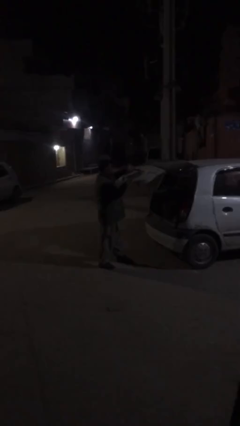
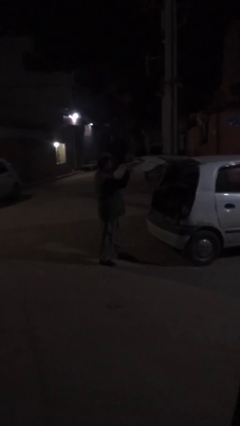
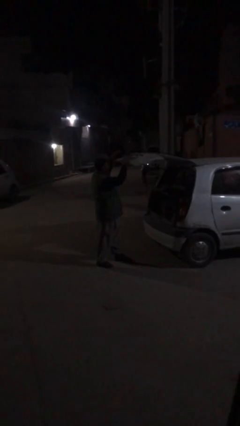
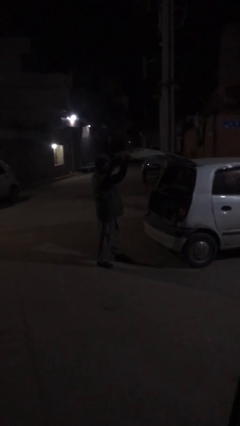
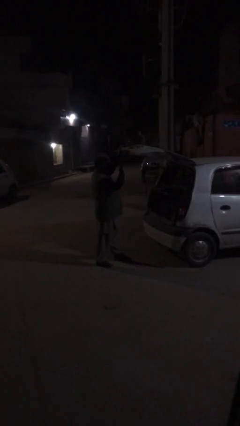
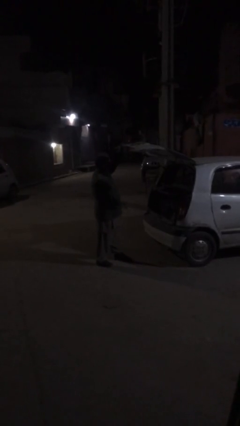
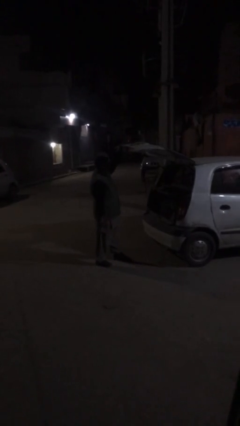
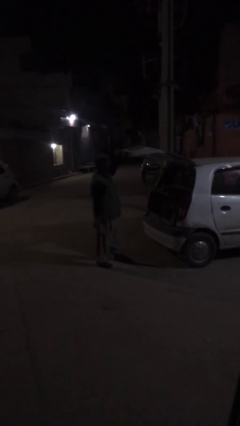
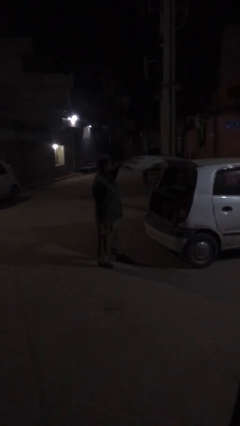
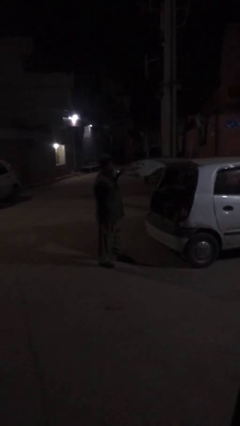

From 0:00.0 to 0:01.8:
person opens car trunk

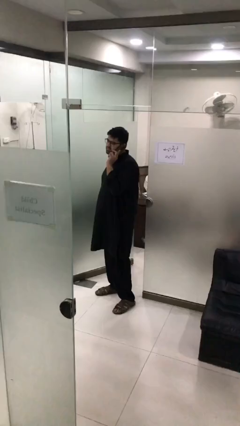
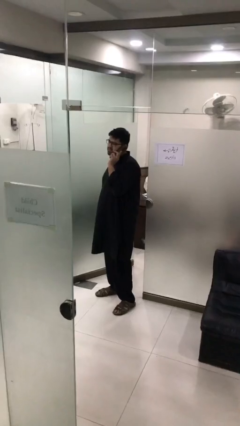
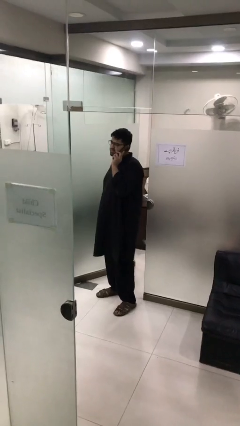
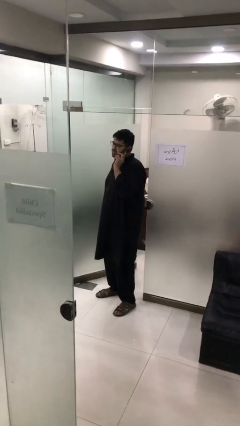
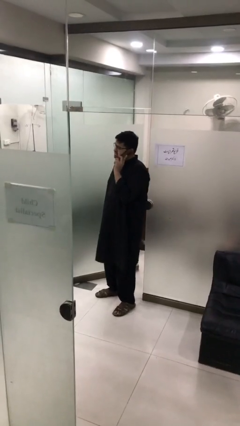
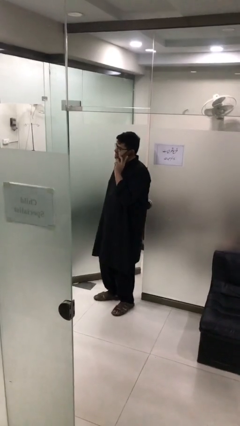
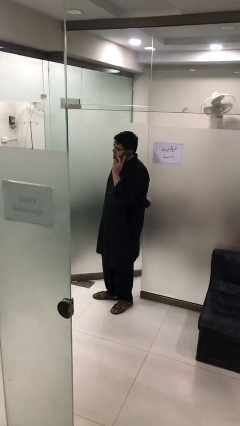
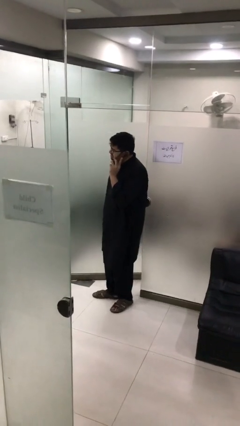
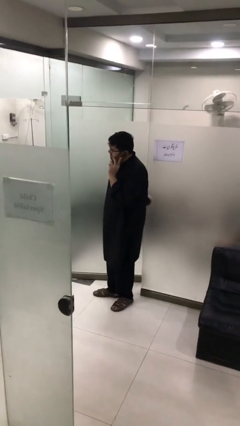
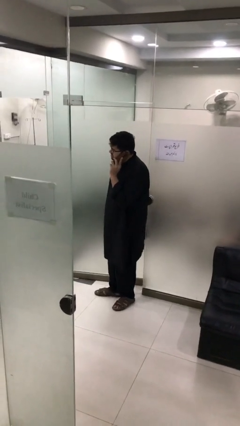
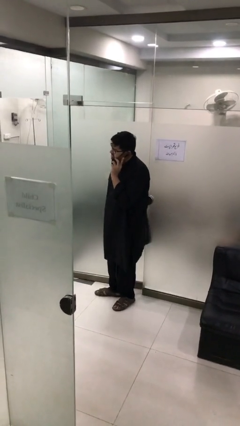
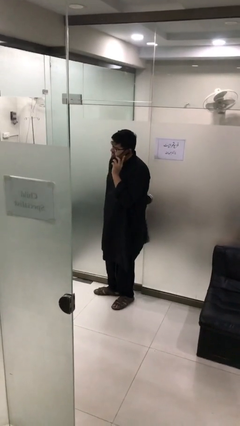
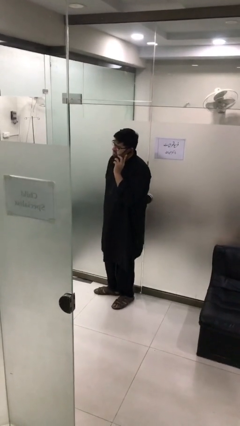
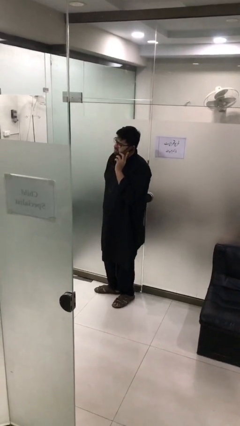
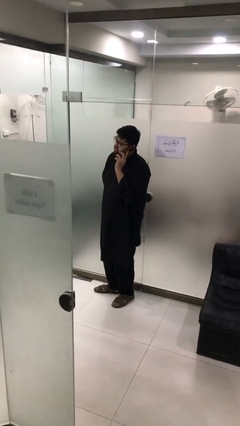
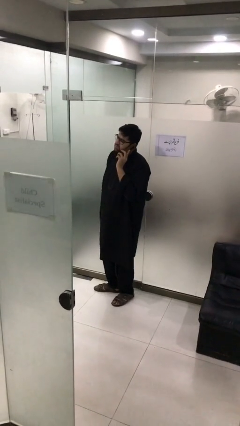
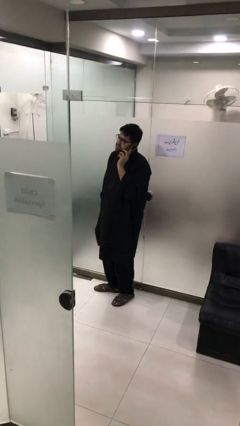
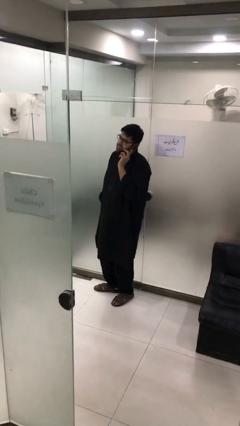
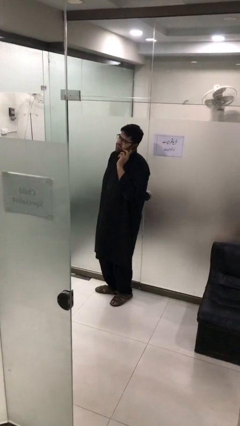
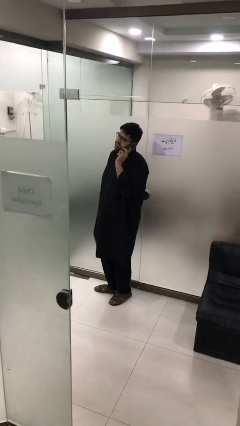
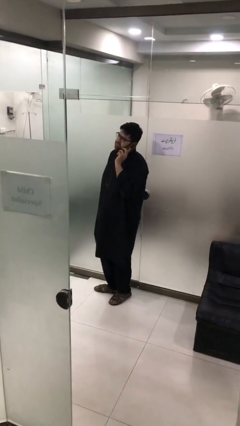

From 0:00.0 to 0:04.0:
person closes facility door

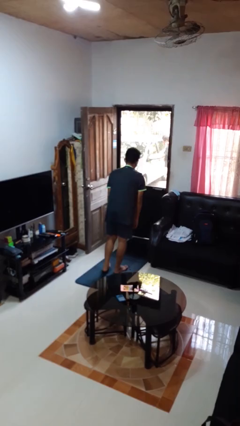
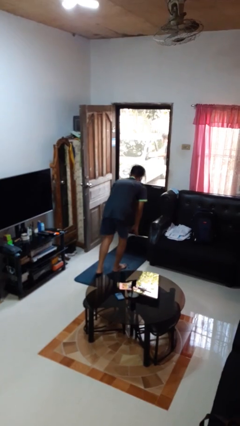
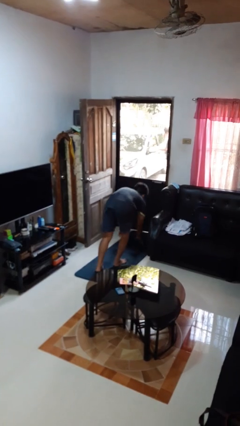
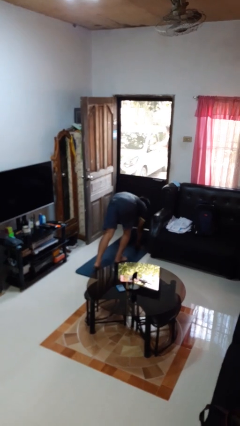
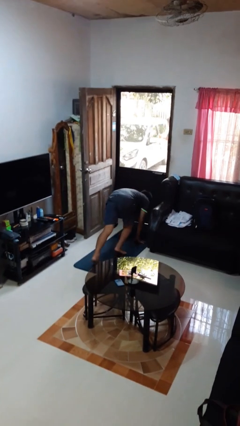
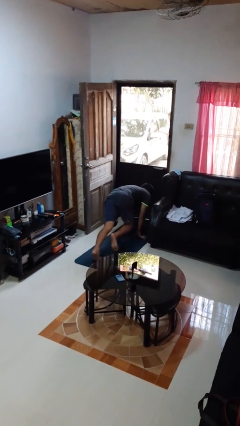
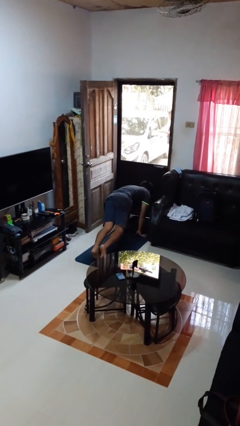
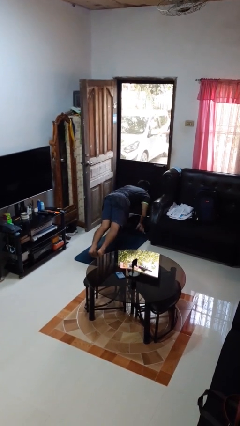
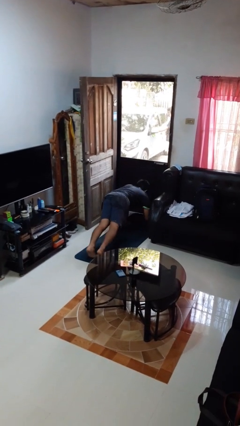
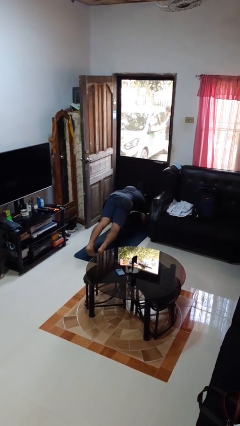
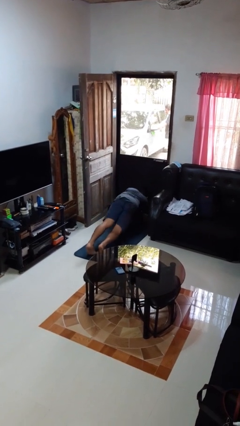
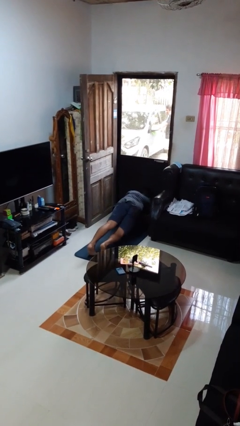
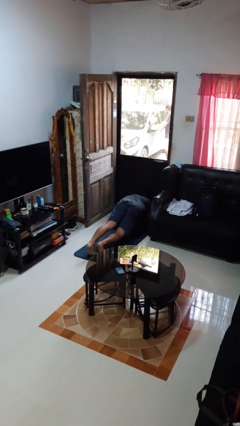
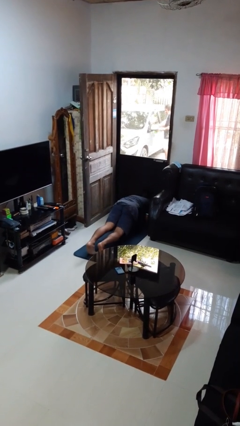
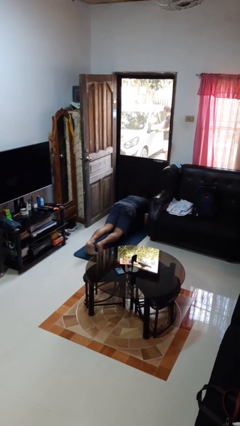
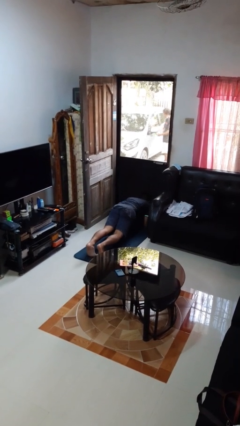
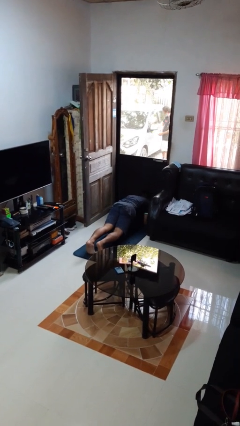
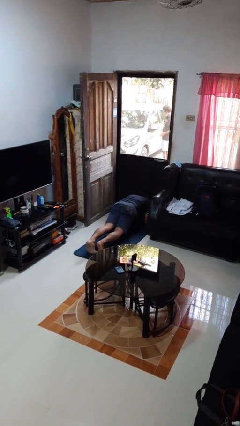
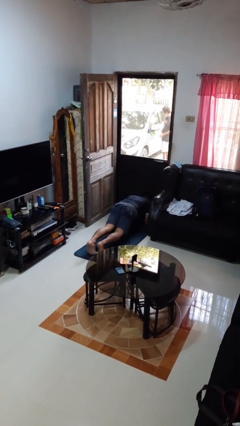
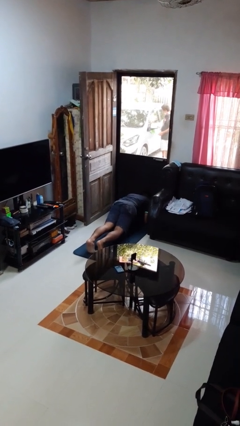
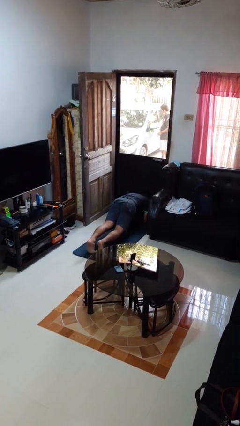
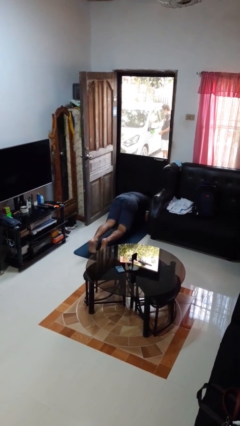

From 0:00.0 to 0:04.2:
person exercises with plank

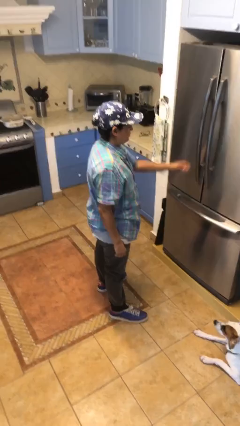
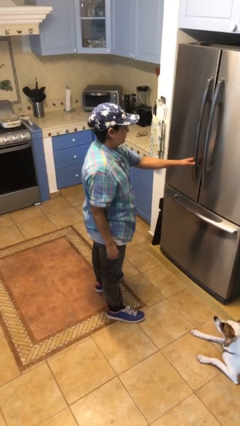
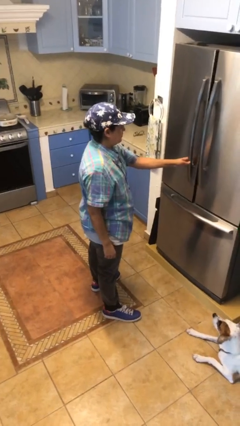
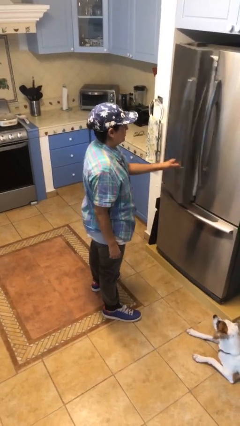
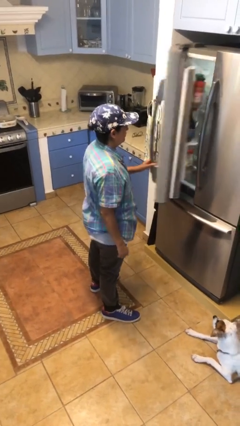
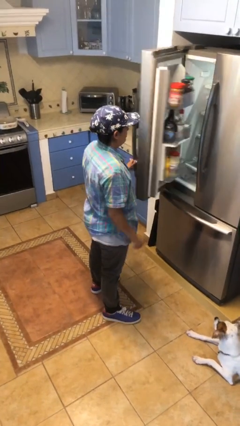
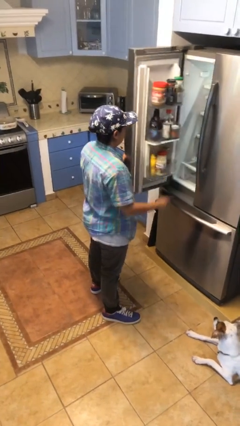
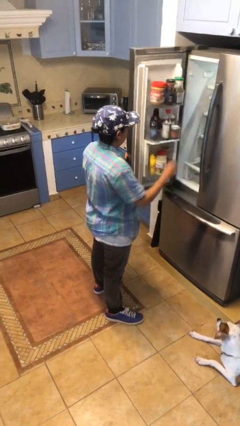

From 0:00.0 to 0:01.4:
person opens refrigerator

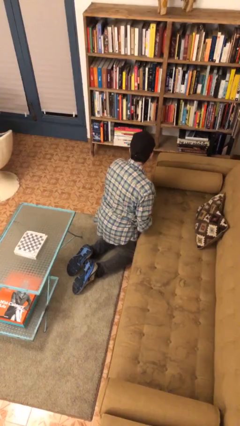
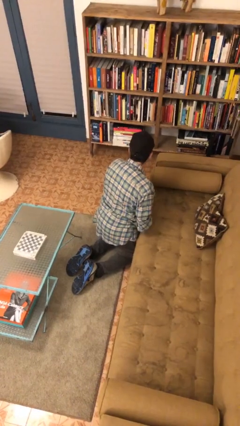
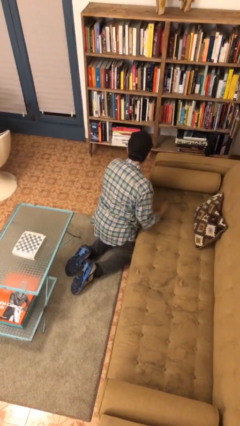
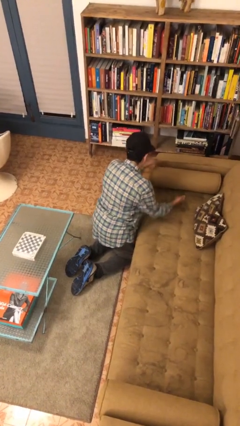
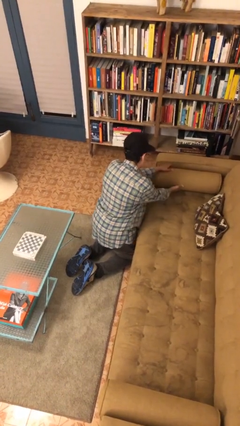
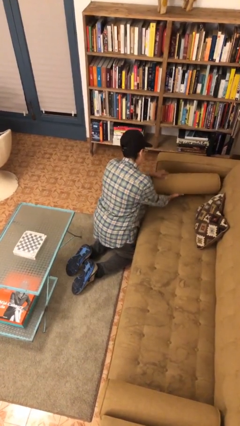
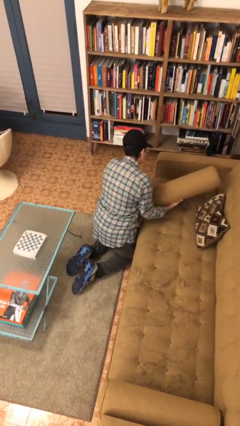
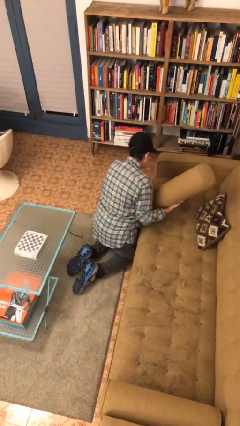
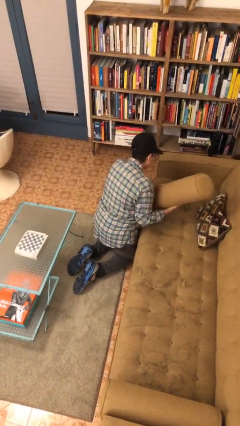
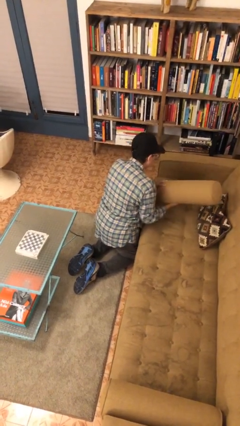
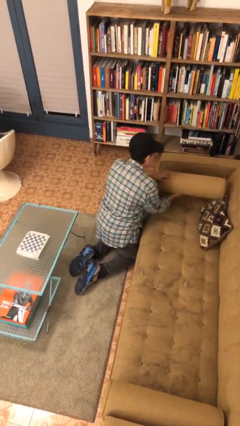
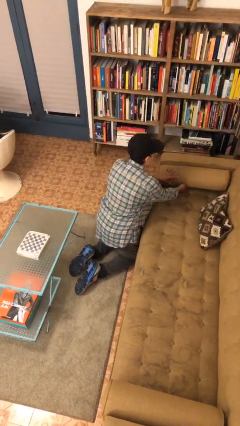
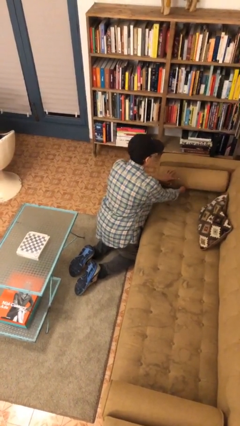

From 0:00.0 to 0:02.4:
person searches in couch

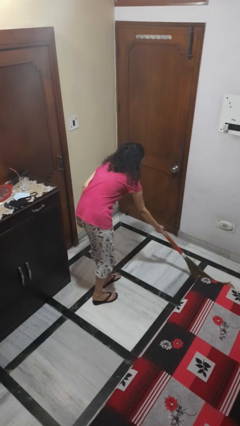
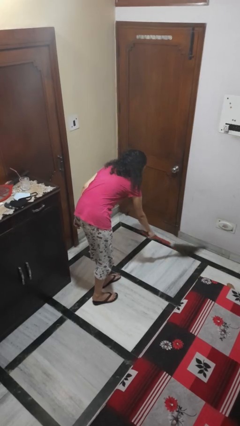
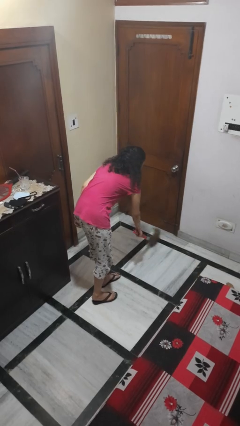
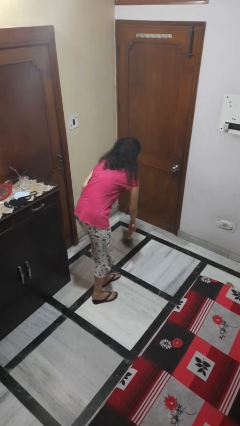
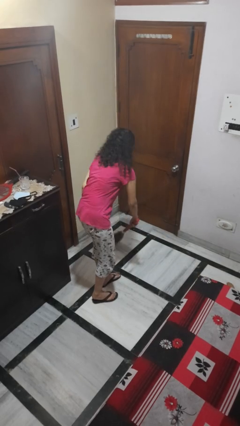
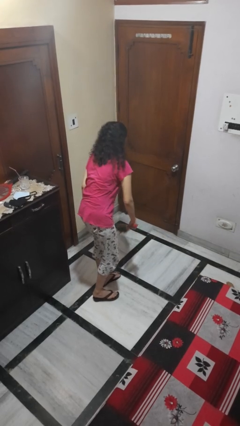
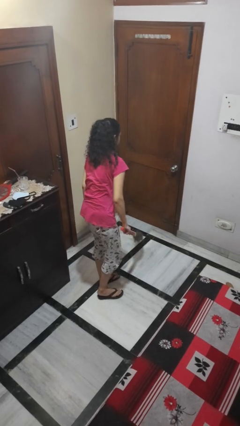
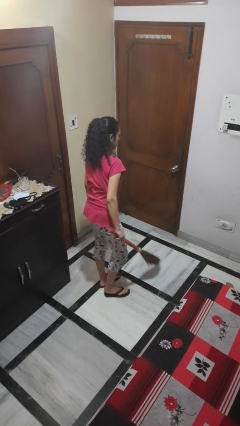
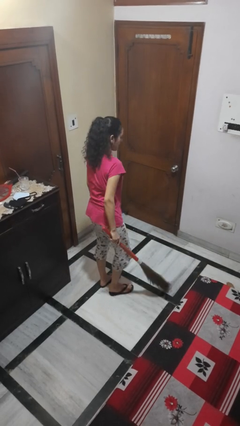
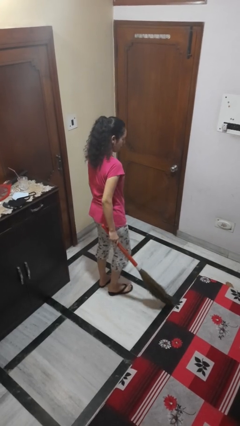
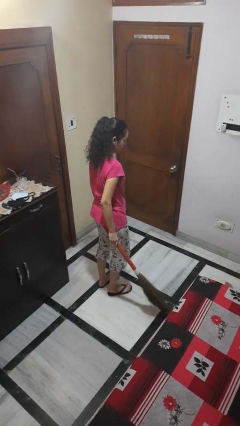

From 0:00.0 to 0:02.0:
person sweeps floor

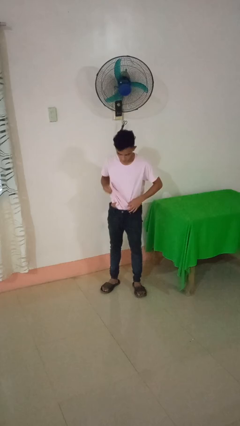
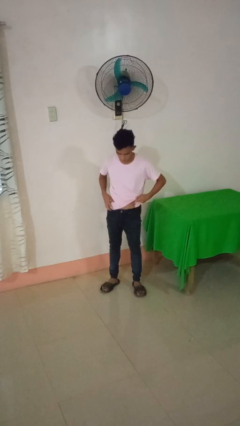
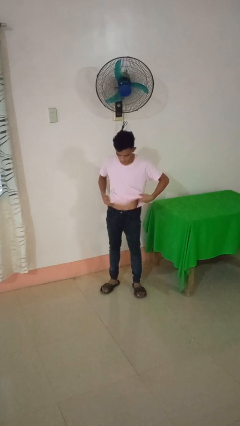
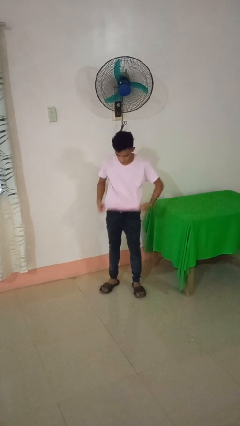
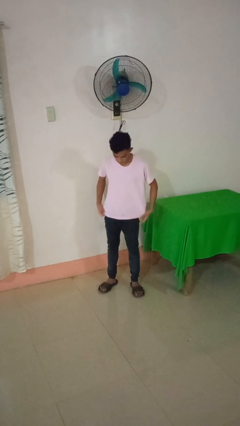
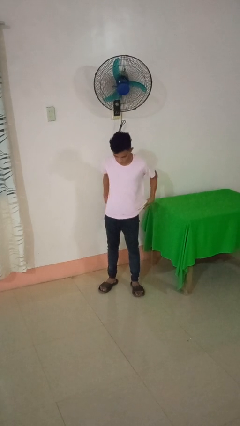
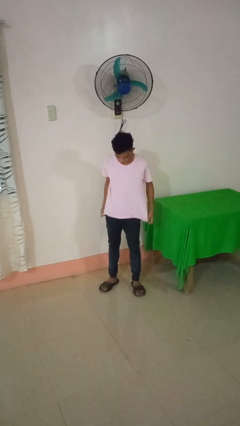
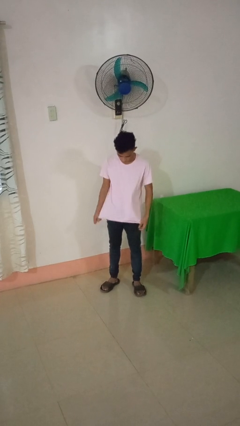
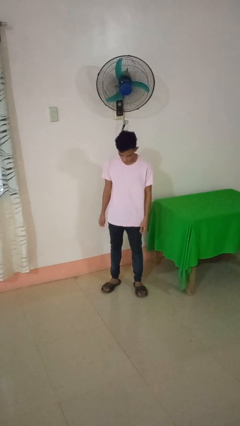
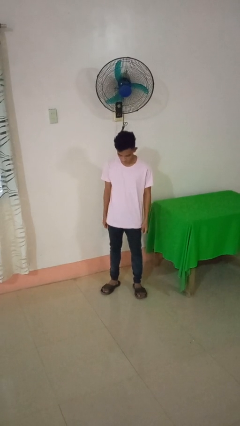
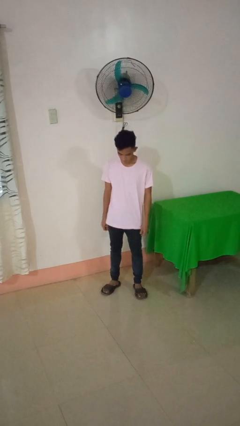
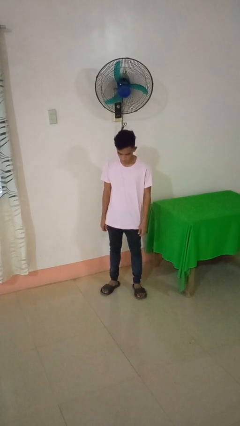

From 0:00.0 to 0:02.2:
person untucks shirt
